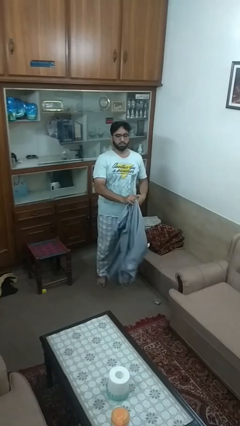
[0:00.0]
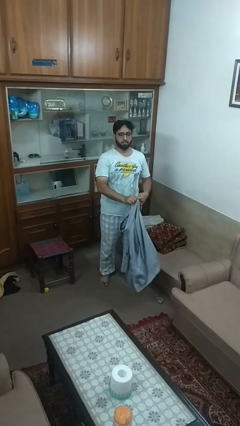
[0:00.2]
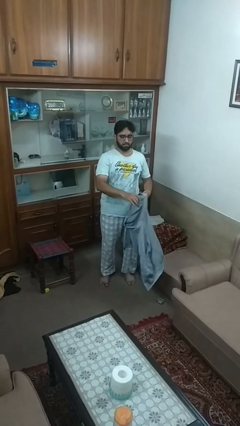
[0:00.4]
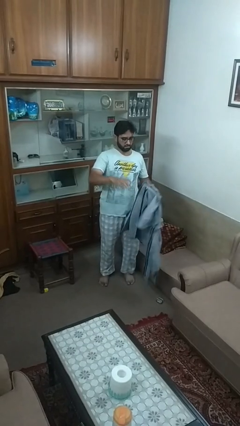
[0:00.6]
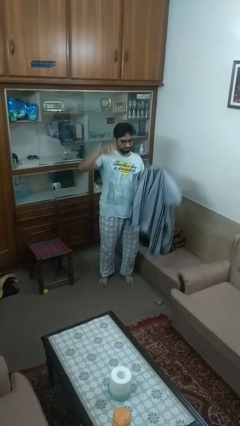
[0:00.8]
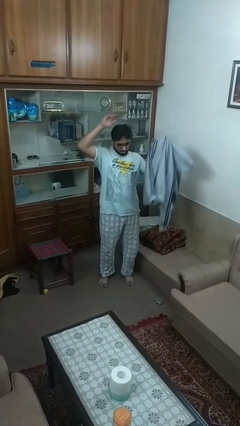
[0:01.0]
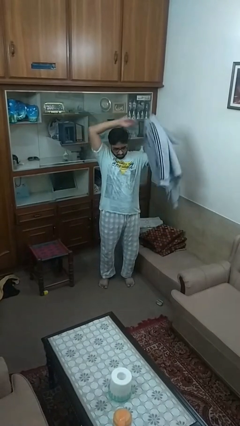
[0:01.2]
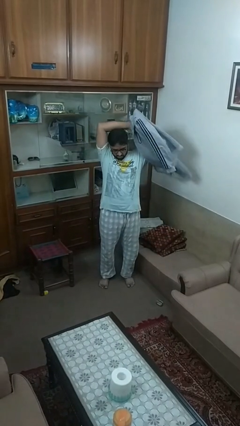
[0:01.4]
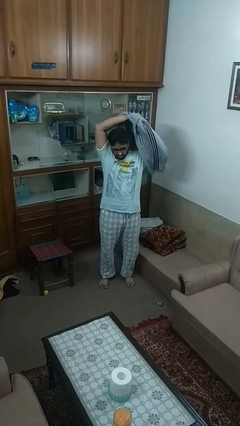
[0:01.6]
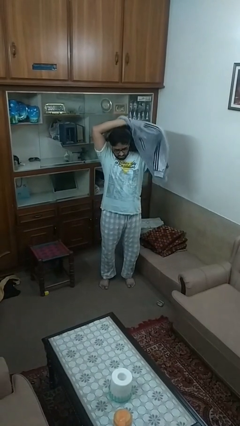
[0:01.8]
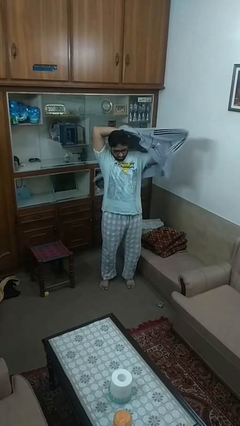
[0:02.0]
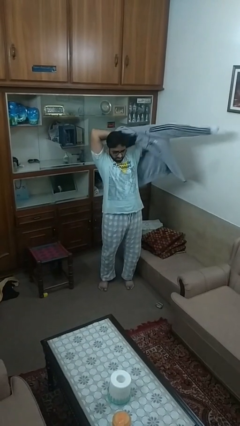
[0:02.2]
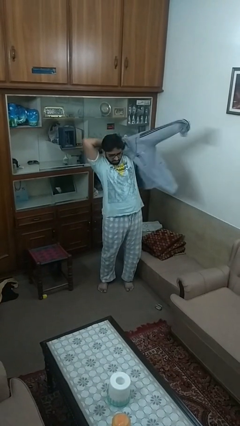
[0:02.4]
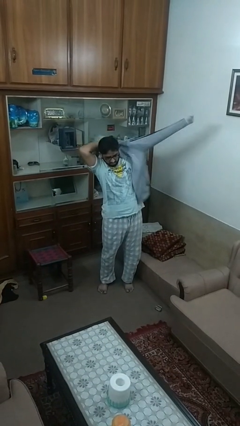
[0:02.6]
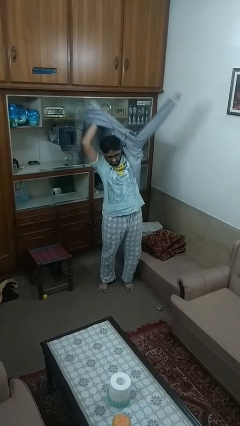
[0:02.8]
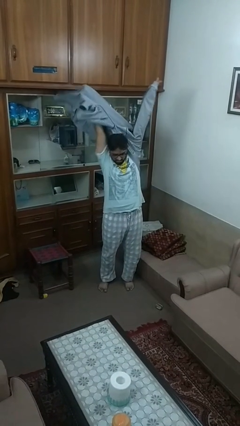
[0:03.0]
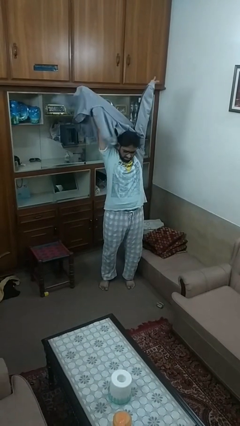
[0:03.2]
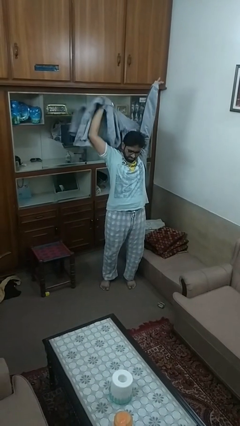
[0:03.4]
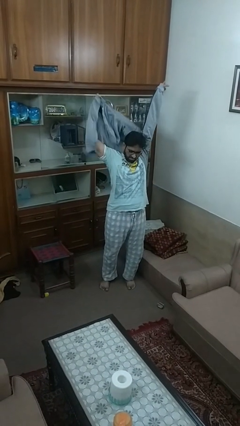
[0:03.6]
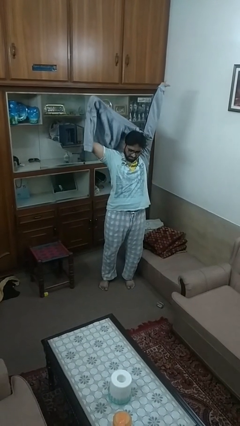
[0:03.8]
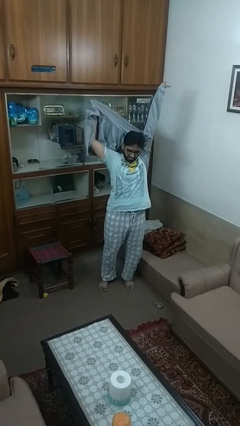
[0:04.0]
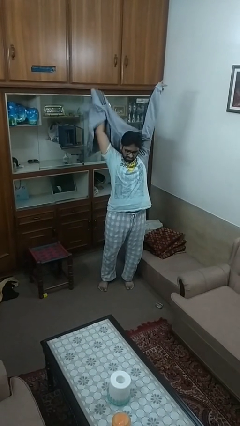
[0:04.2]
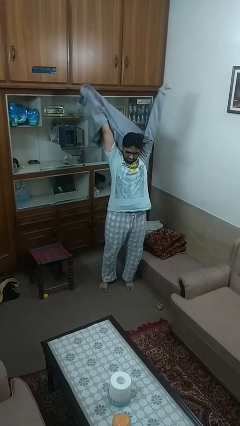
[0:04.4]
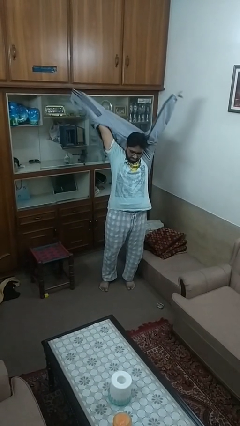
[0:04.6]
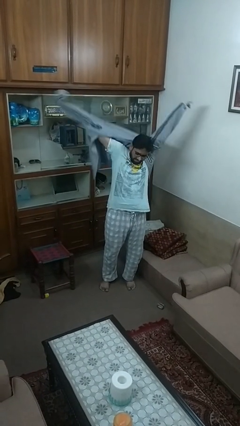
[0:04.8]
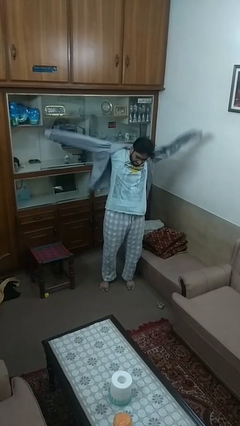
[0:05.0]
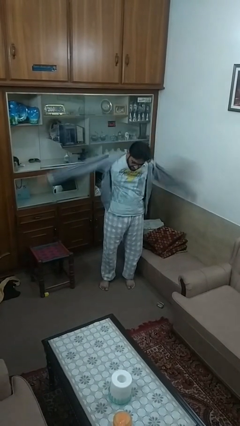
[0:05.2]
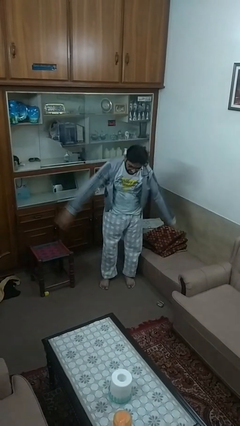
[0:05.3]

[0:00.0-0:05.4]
person puts on jacket

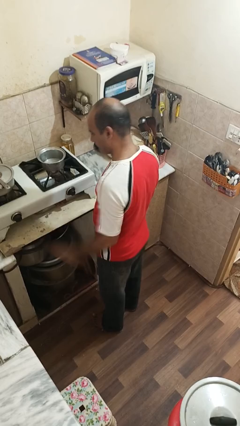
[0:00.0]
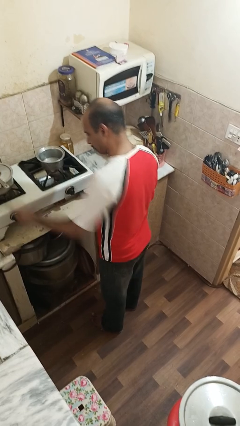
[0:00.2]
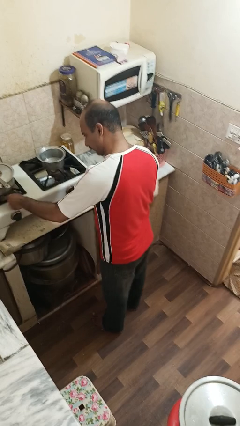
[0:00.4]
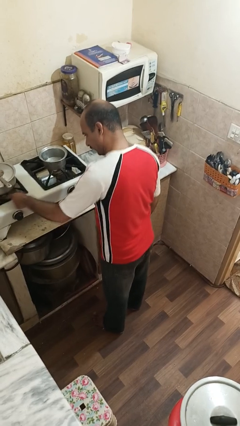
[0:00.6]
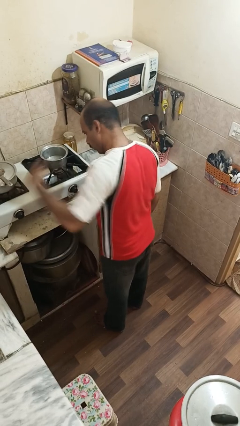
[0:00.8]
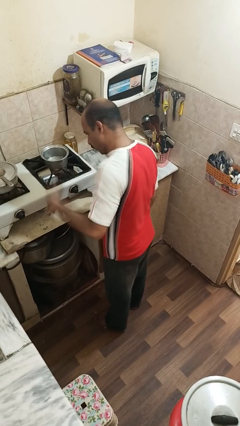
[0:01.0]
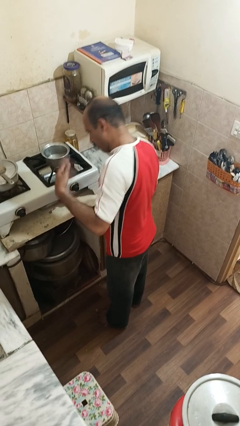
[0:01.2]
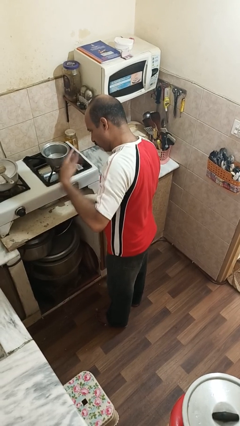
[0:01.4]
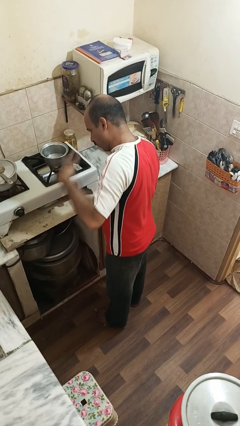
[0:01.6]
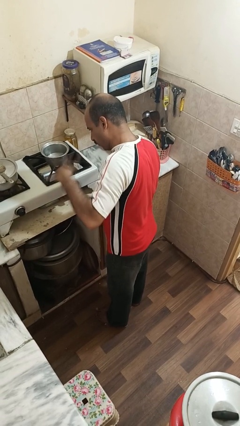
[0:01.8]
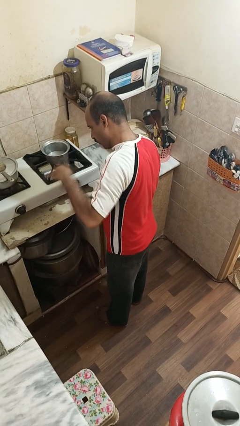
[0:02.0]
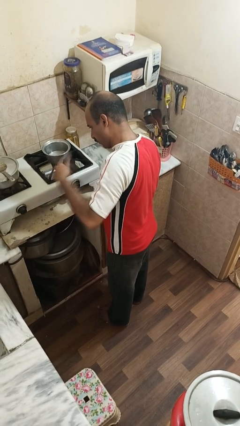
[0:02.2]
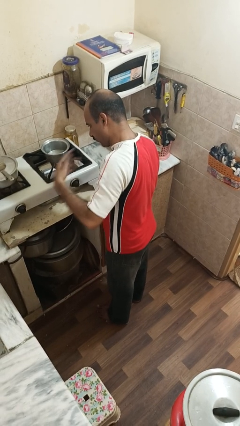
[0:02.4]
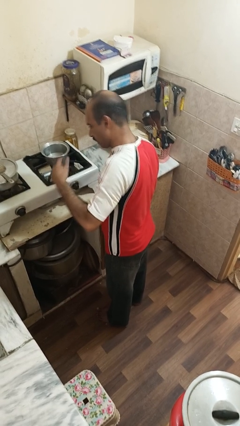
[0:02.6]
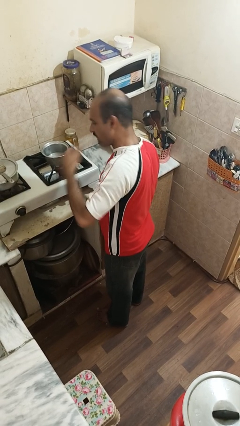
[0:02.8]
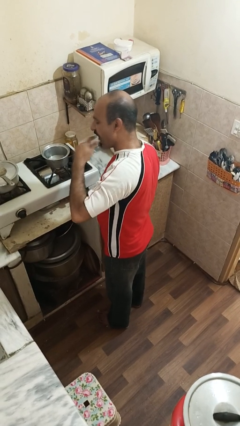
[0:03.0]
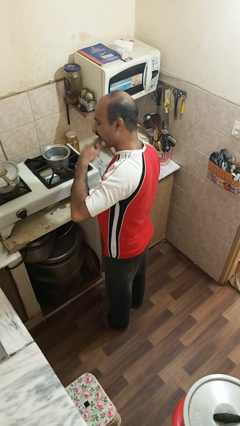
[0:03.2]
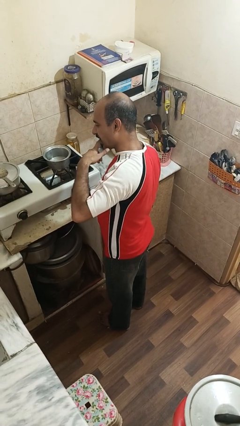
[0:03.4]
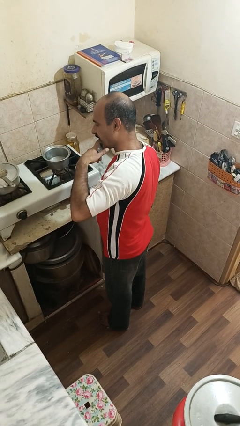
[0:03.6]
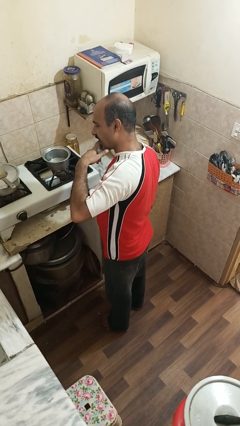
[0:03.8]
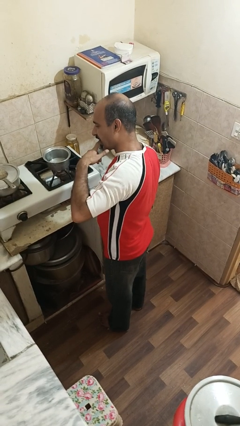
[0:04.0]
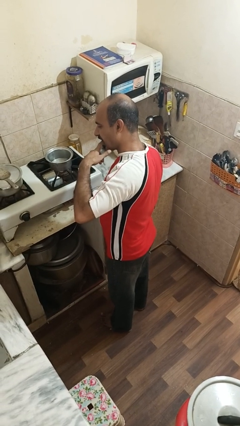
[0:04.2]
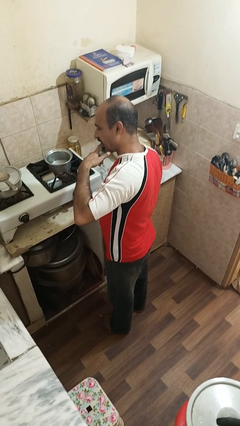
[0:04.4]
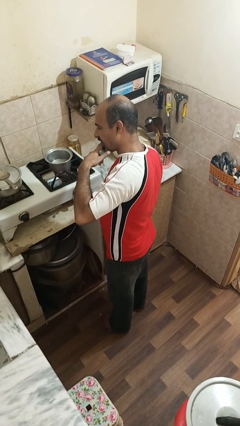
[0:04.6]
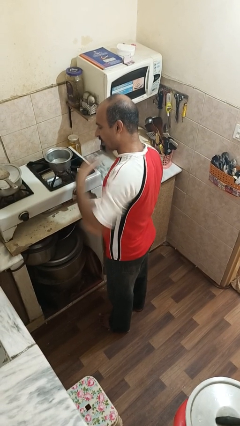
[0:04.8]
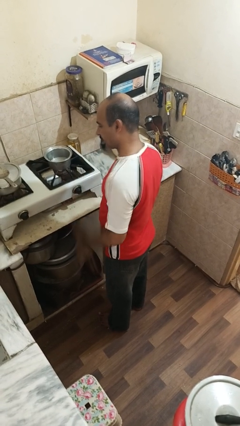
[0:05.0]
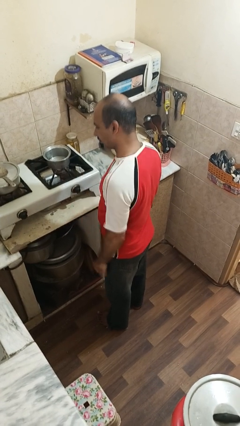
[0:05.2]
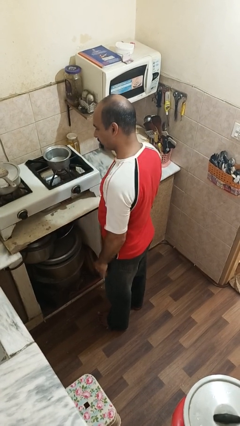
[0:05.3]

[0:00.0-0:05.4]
person burns hand

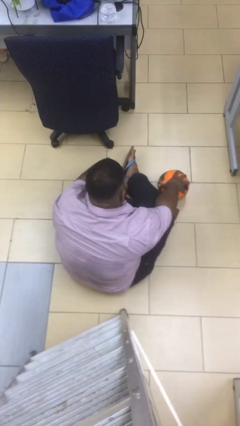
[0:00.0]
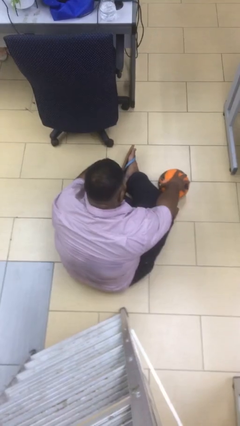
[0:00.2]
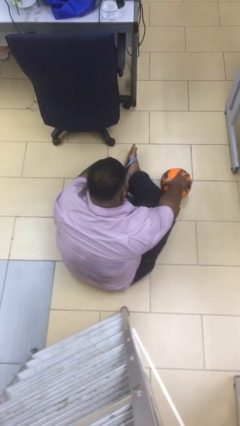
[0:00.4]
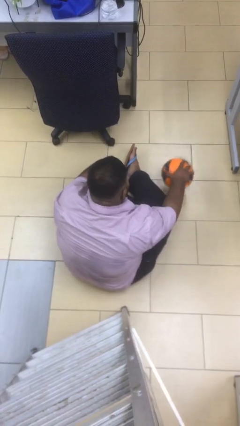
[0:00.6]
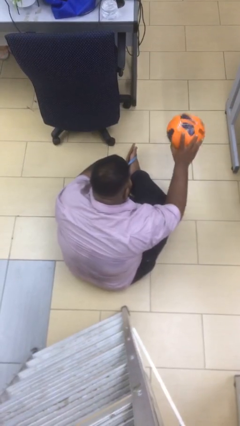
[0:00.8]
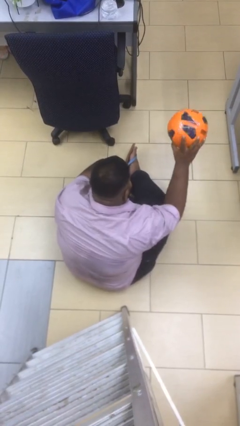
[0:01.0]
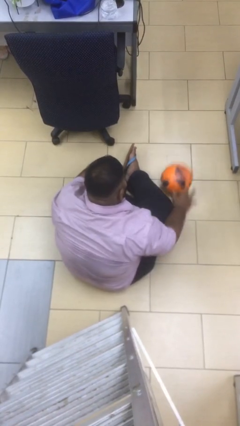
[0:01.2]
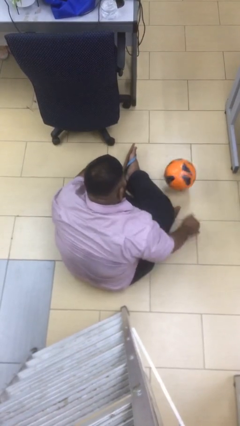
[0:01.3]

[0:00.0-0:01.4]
person bounces ball on floor

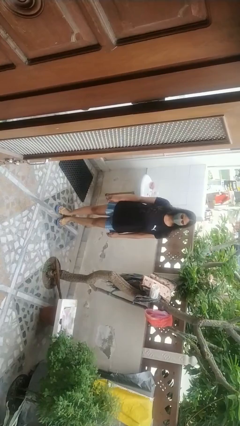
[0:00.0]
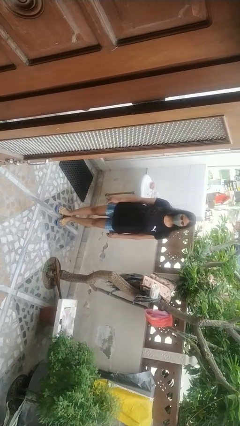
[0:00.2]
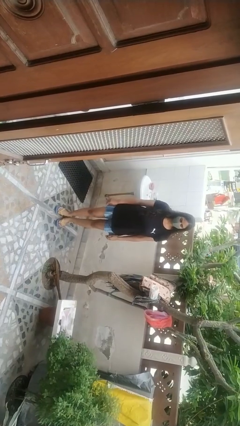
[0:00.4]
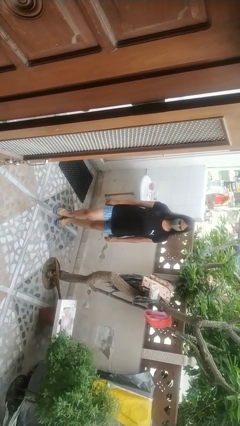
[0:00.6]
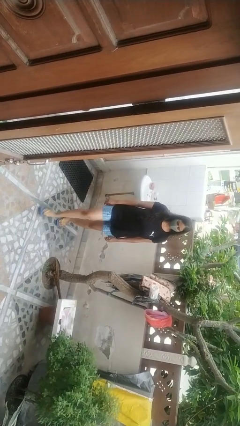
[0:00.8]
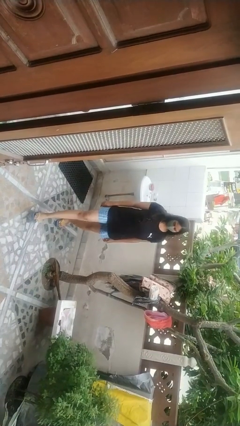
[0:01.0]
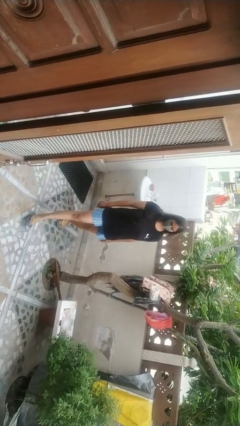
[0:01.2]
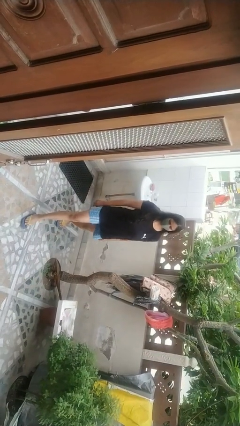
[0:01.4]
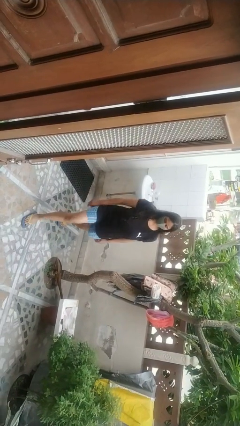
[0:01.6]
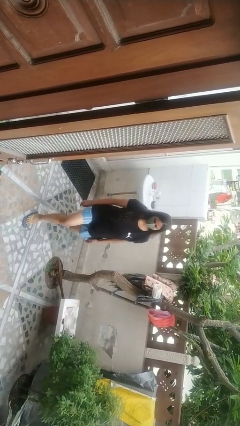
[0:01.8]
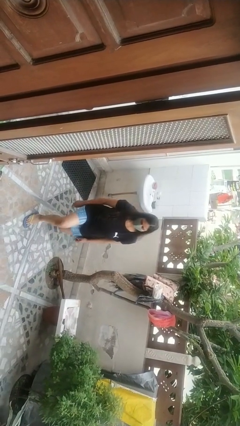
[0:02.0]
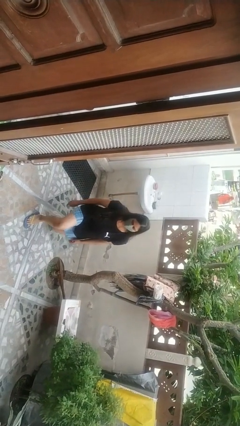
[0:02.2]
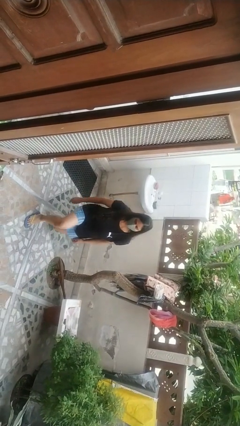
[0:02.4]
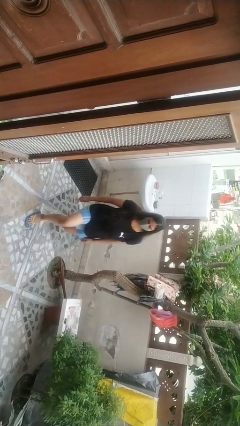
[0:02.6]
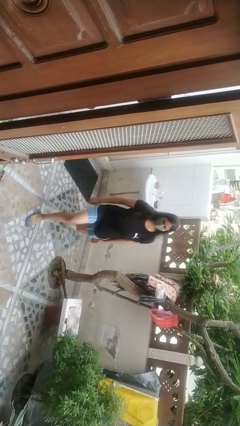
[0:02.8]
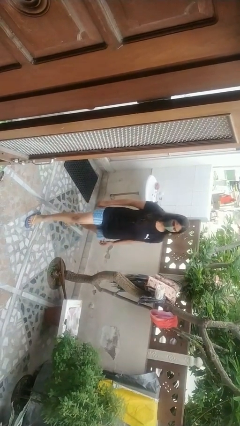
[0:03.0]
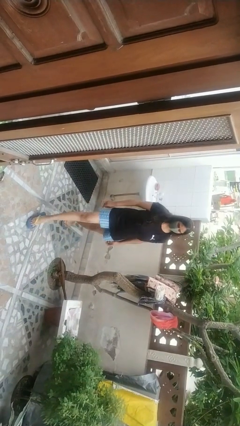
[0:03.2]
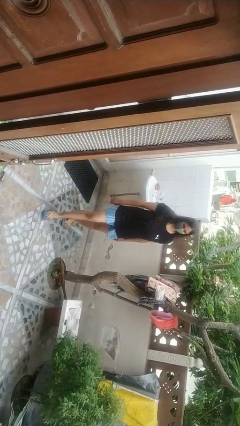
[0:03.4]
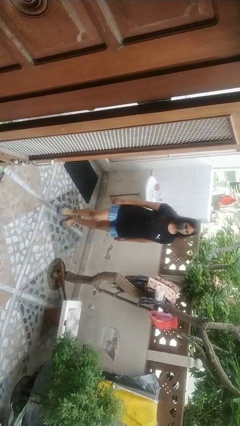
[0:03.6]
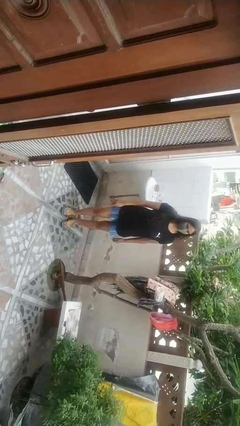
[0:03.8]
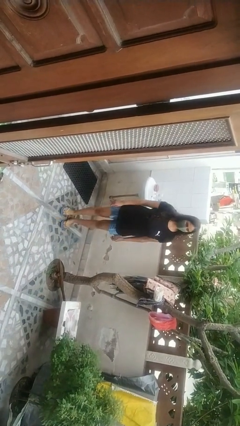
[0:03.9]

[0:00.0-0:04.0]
person exercises with lunges

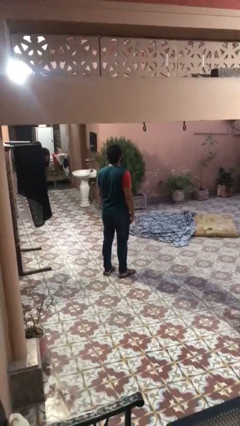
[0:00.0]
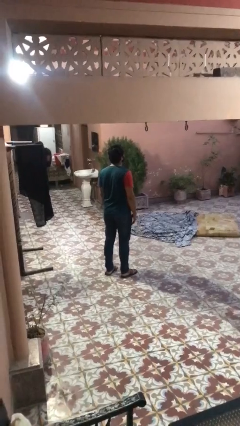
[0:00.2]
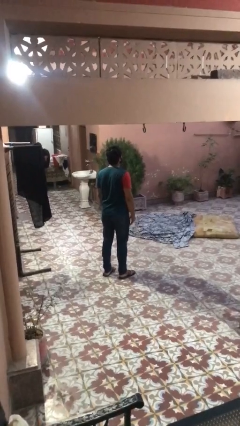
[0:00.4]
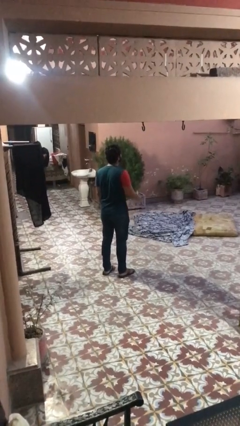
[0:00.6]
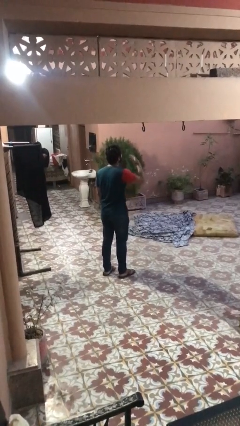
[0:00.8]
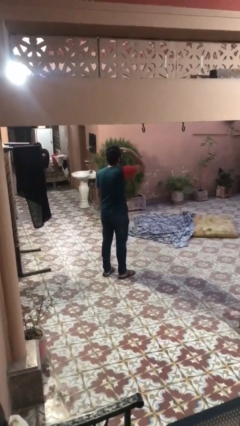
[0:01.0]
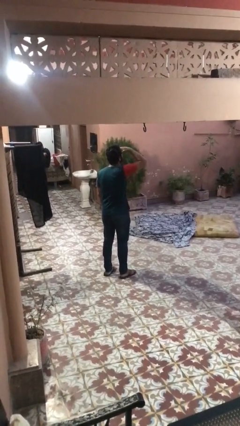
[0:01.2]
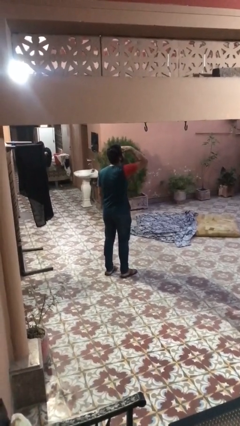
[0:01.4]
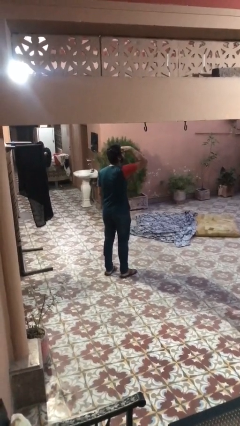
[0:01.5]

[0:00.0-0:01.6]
person shades eyes
